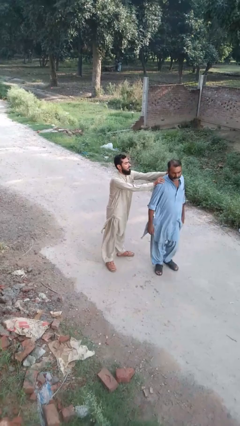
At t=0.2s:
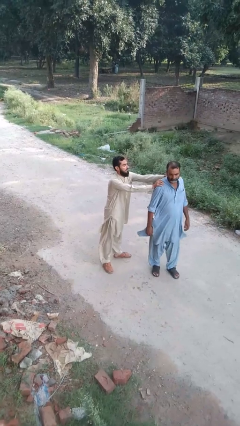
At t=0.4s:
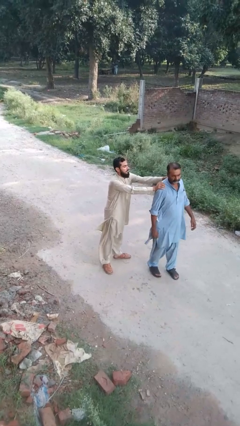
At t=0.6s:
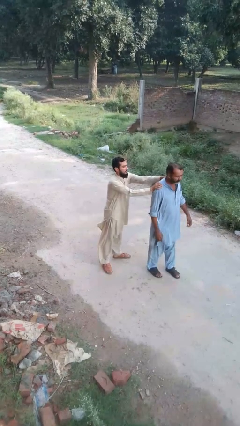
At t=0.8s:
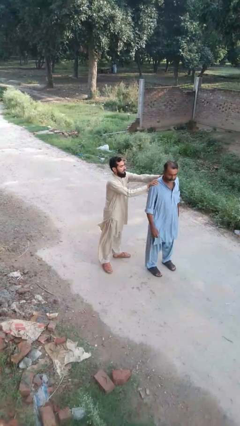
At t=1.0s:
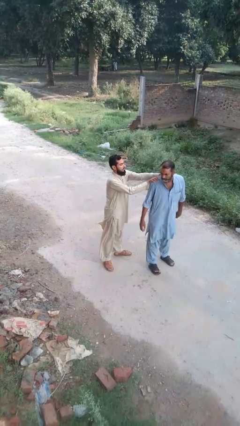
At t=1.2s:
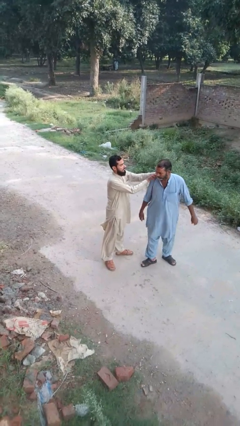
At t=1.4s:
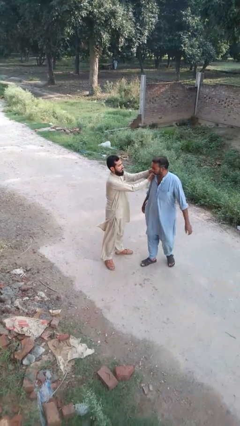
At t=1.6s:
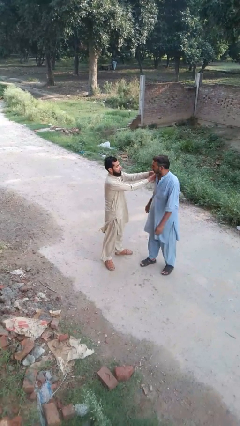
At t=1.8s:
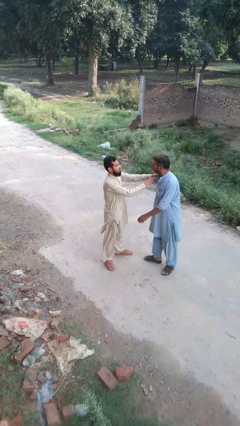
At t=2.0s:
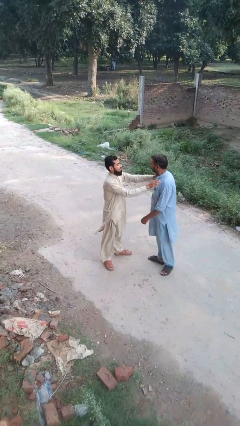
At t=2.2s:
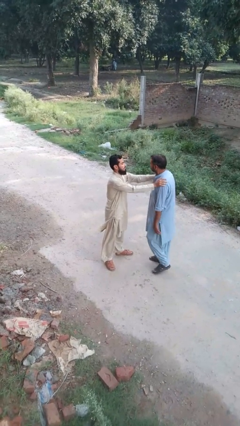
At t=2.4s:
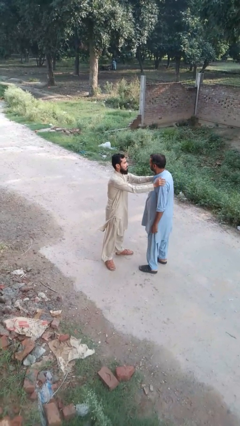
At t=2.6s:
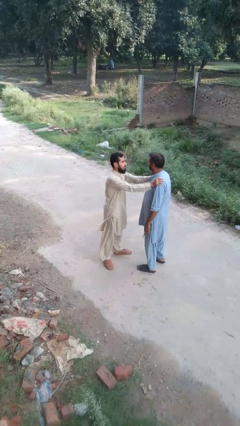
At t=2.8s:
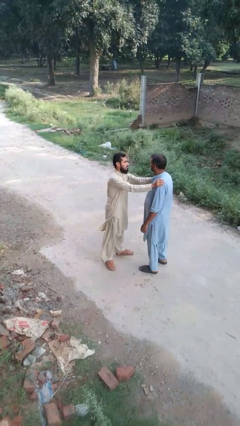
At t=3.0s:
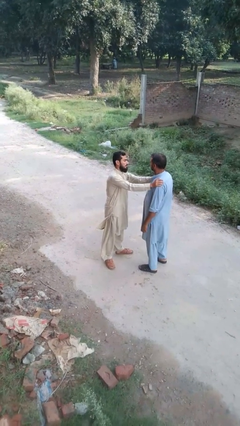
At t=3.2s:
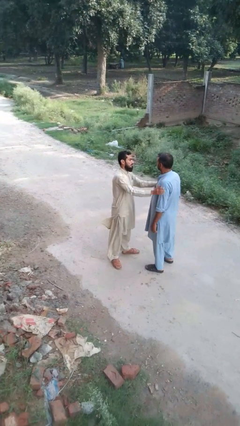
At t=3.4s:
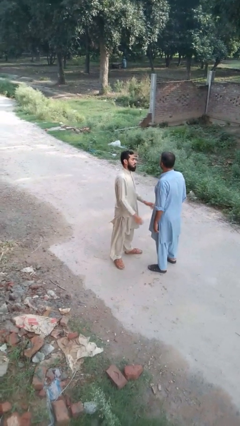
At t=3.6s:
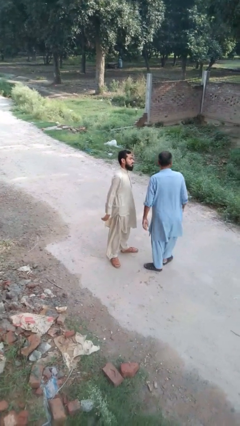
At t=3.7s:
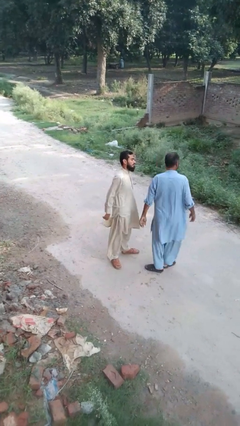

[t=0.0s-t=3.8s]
person spins person around

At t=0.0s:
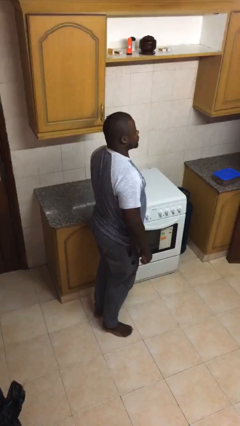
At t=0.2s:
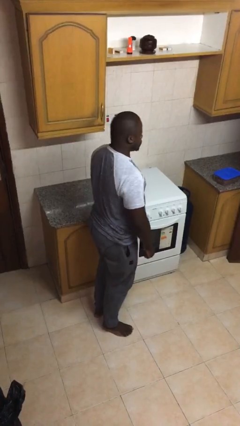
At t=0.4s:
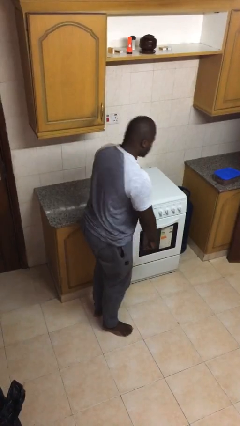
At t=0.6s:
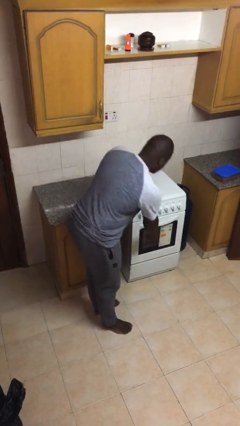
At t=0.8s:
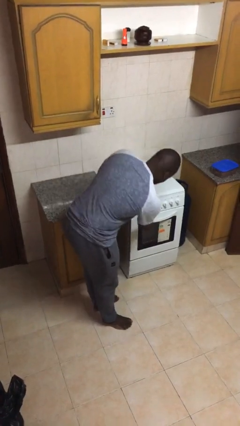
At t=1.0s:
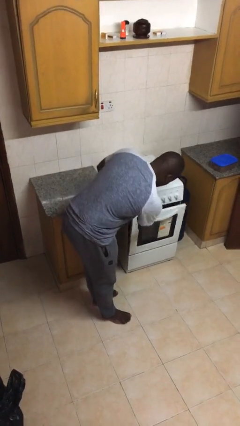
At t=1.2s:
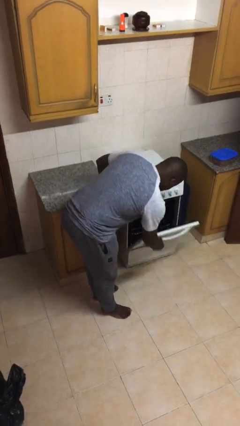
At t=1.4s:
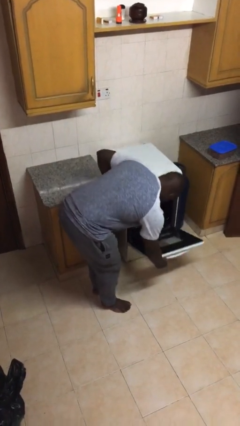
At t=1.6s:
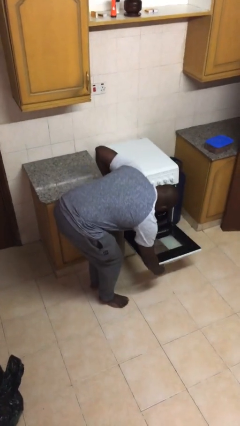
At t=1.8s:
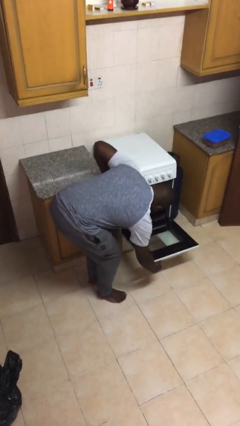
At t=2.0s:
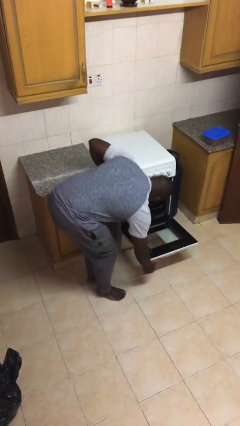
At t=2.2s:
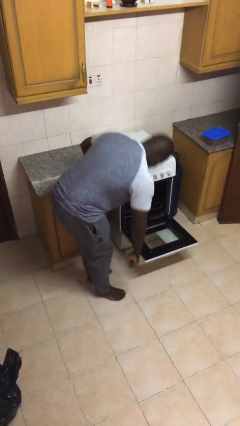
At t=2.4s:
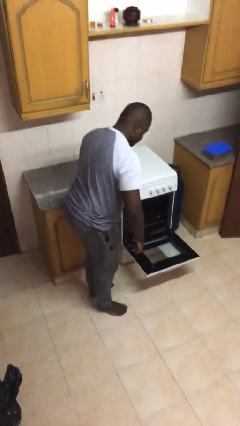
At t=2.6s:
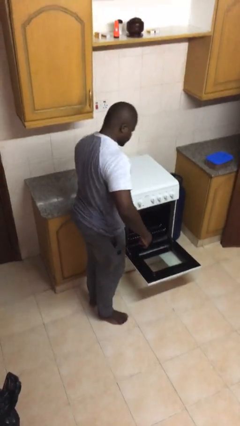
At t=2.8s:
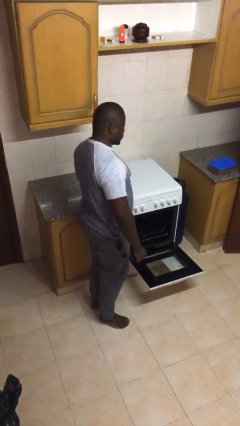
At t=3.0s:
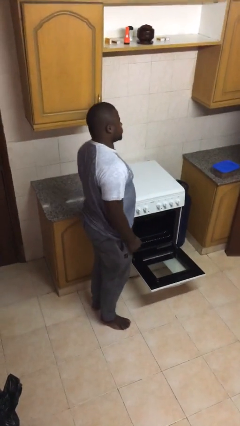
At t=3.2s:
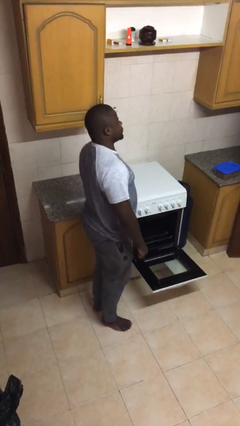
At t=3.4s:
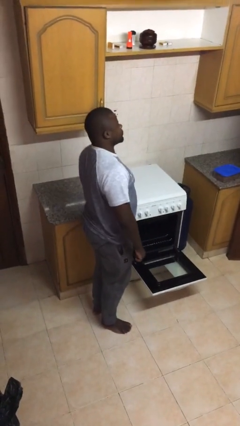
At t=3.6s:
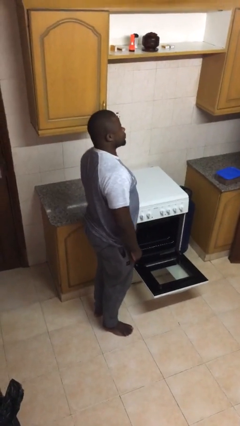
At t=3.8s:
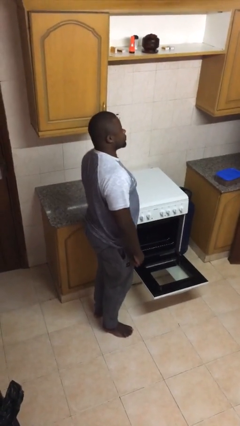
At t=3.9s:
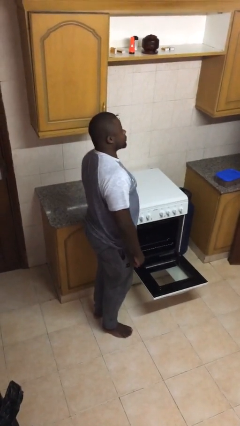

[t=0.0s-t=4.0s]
person opens oven door

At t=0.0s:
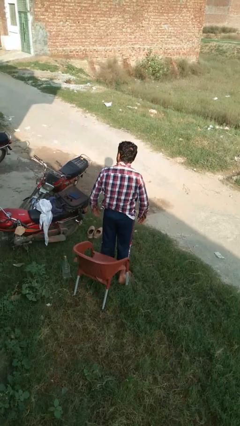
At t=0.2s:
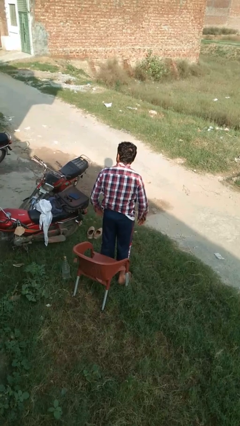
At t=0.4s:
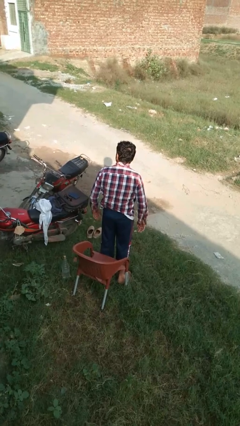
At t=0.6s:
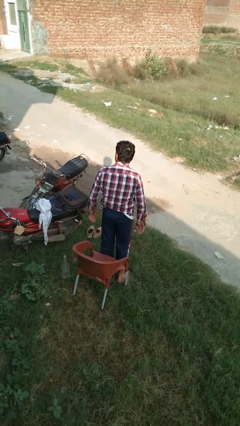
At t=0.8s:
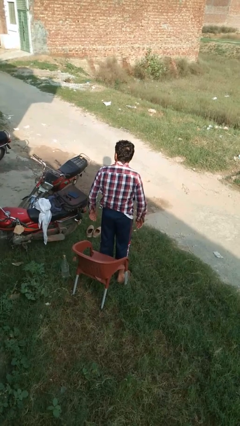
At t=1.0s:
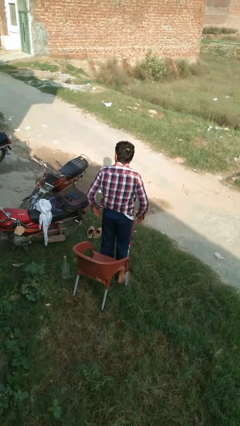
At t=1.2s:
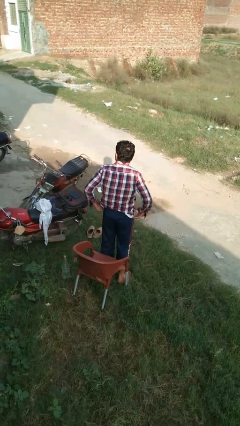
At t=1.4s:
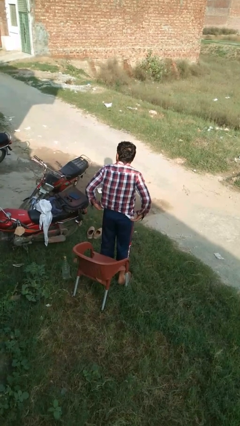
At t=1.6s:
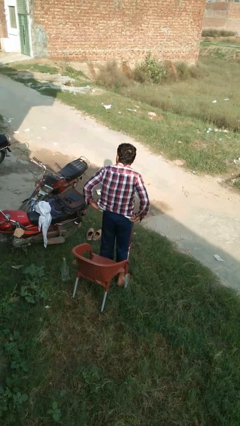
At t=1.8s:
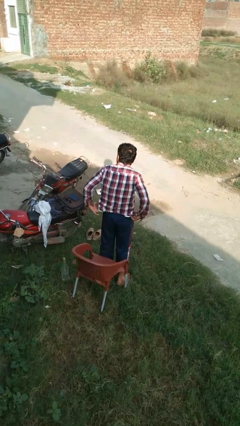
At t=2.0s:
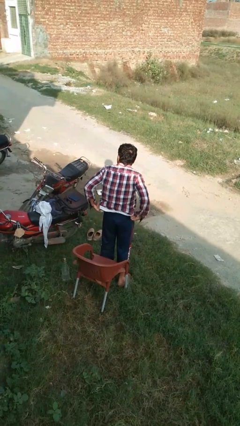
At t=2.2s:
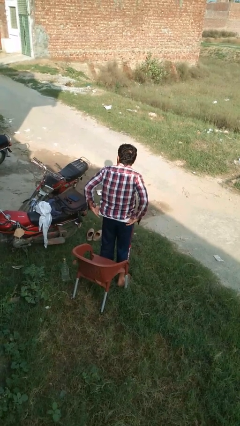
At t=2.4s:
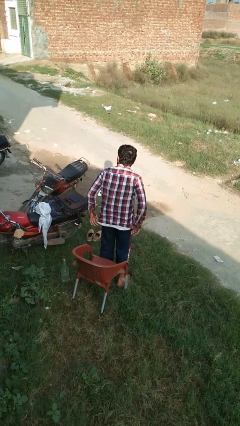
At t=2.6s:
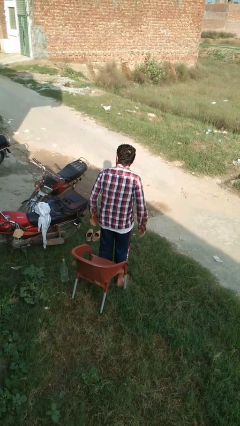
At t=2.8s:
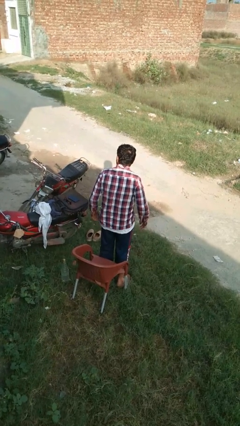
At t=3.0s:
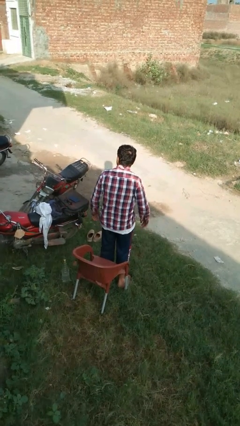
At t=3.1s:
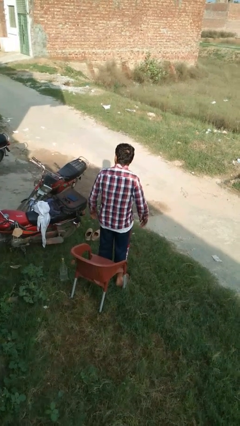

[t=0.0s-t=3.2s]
person untucks shirt

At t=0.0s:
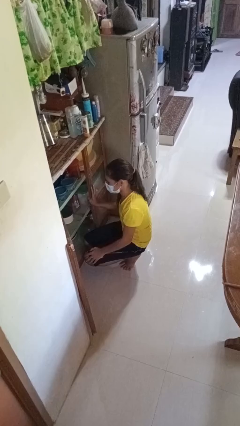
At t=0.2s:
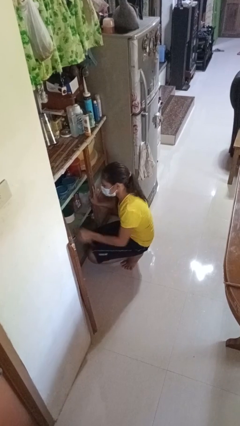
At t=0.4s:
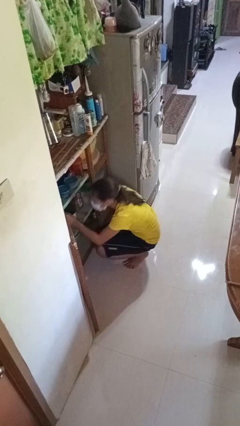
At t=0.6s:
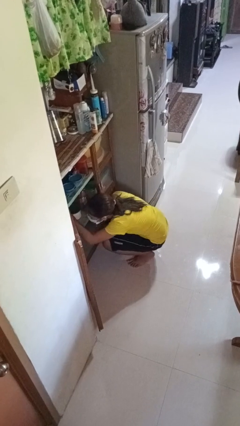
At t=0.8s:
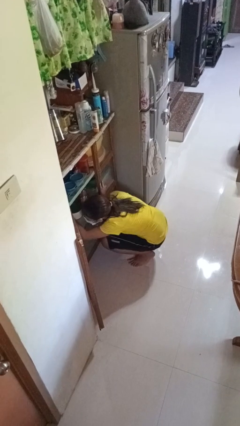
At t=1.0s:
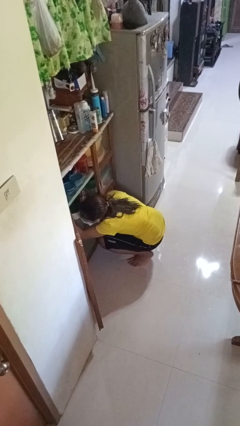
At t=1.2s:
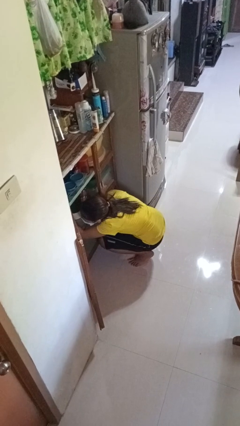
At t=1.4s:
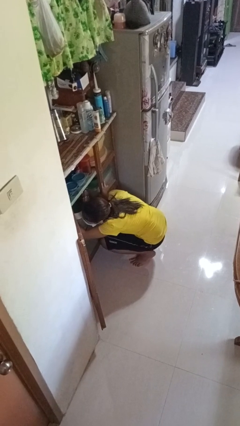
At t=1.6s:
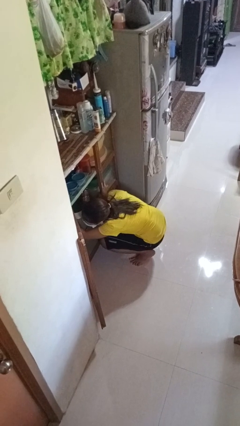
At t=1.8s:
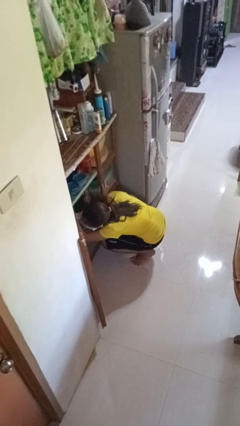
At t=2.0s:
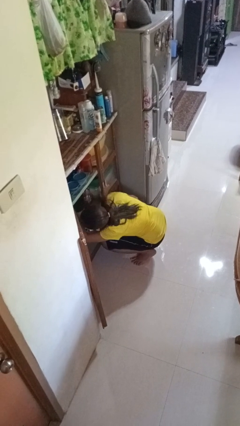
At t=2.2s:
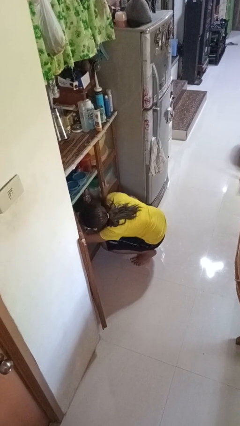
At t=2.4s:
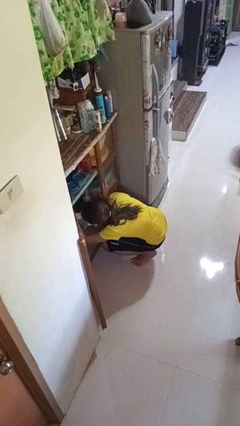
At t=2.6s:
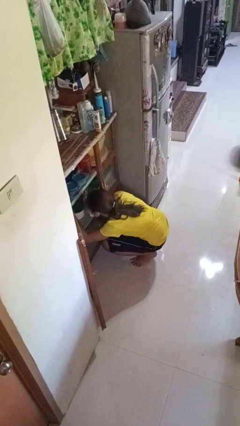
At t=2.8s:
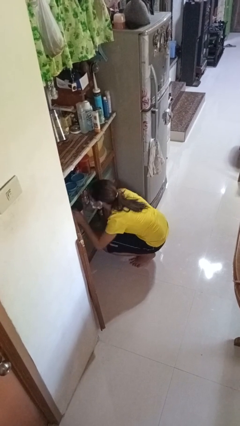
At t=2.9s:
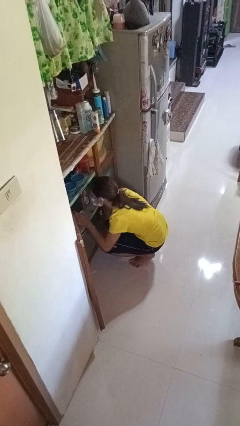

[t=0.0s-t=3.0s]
person searches in cabinet

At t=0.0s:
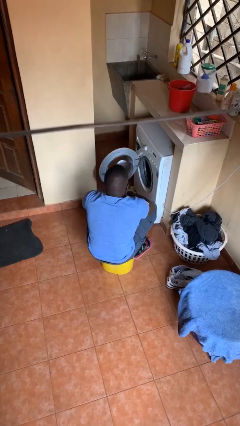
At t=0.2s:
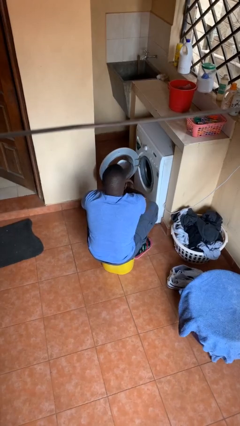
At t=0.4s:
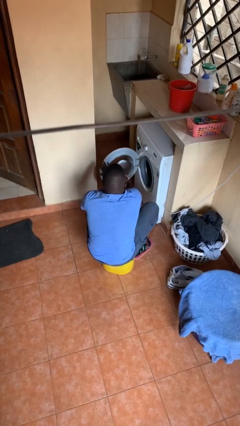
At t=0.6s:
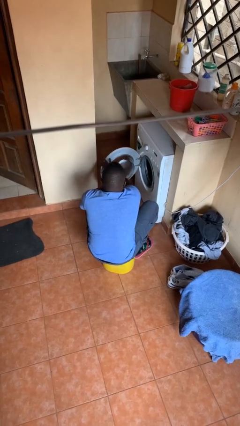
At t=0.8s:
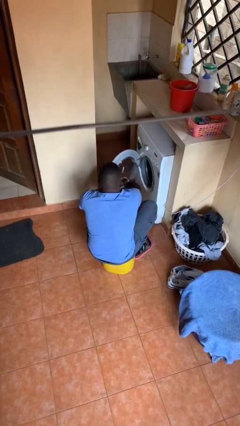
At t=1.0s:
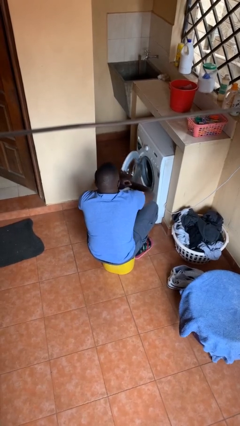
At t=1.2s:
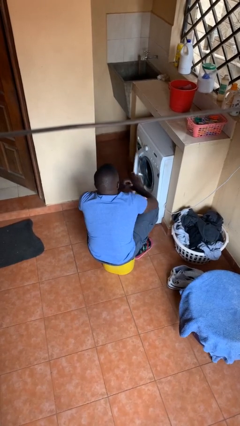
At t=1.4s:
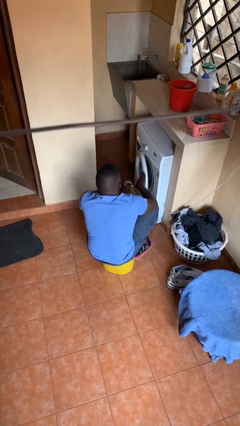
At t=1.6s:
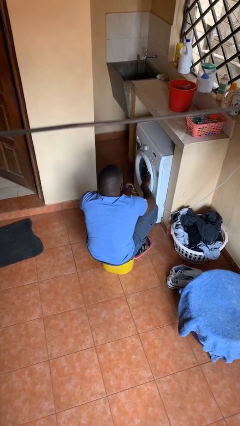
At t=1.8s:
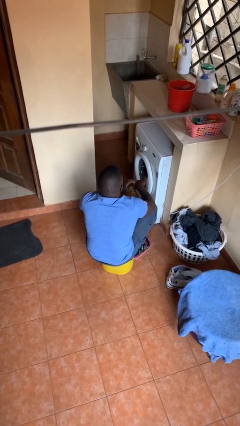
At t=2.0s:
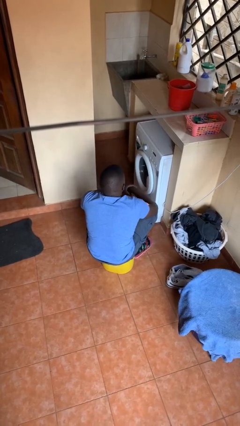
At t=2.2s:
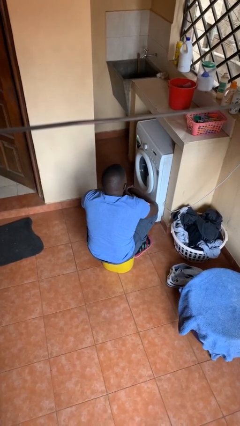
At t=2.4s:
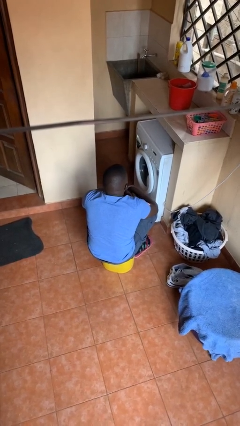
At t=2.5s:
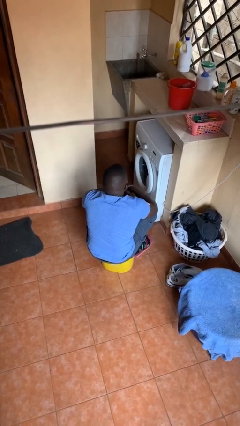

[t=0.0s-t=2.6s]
person closes clothes washer

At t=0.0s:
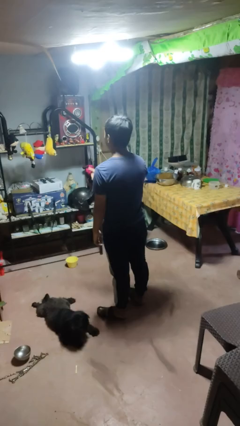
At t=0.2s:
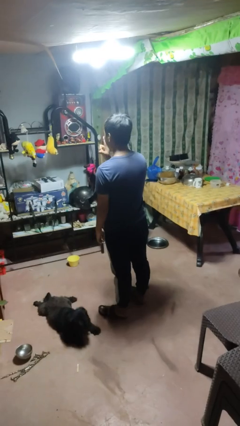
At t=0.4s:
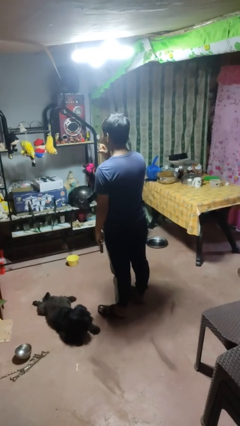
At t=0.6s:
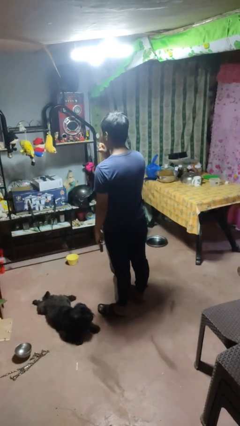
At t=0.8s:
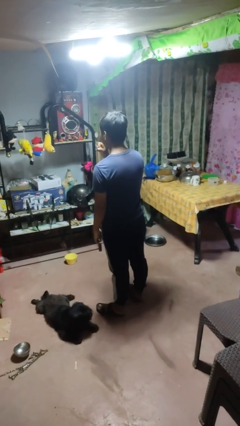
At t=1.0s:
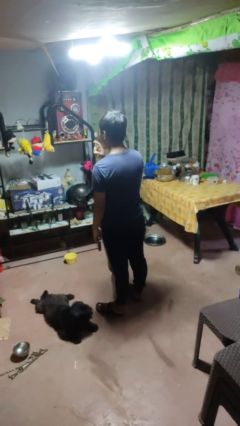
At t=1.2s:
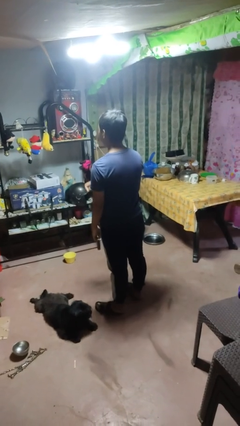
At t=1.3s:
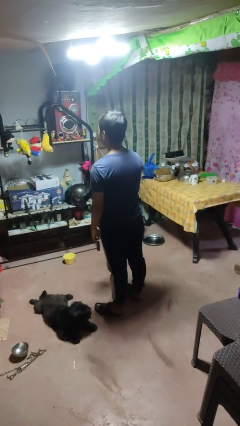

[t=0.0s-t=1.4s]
person gestures be quiet
